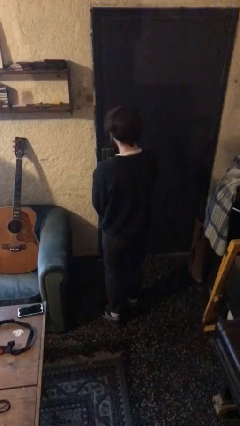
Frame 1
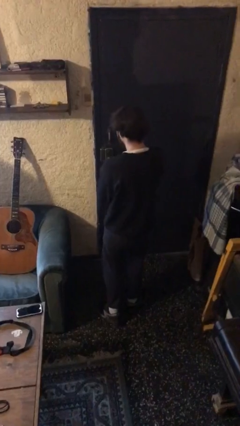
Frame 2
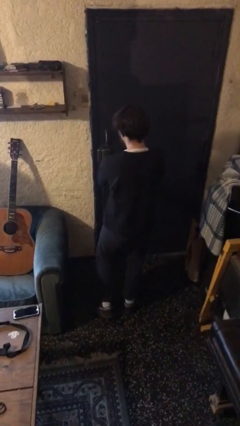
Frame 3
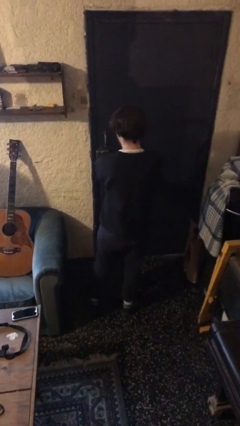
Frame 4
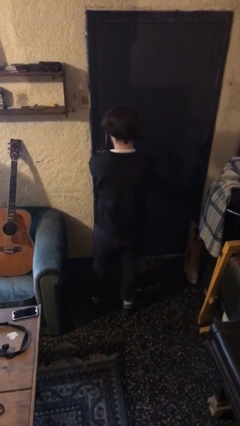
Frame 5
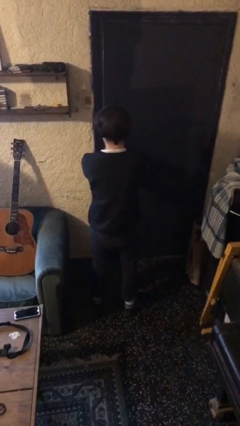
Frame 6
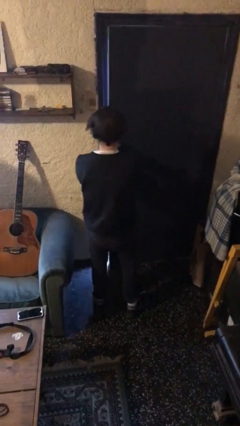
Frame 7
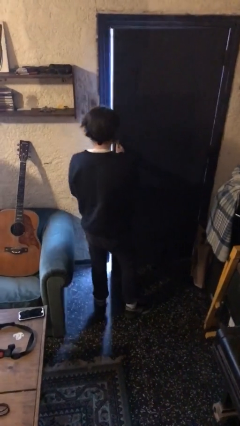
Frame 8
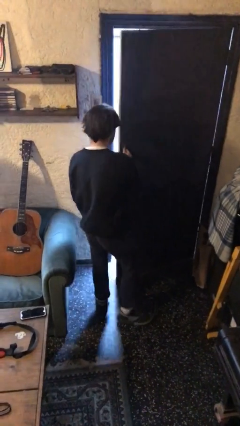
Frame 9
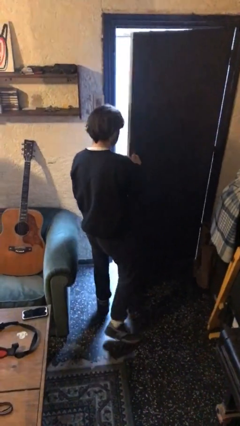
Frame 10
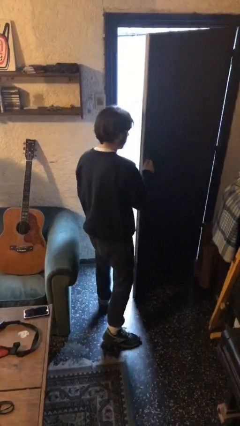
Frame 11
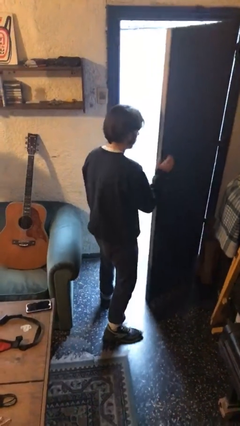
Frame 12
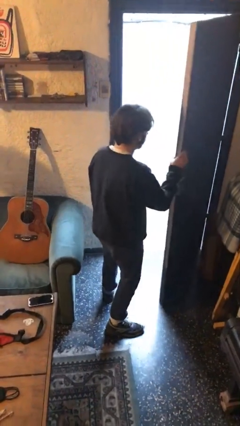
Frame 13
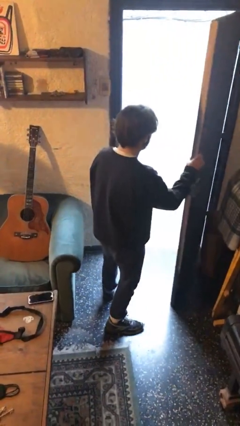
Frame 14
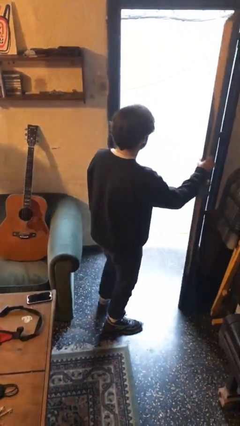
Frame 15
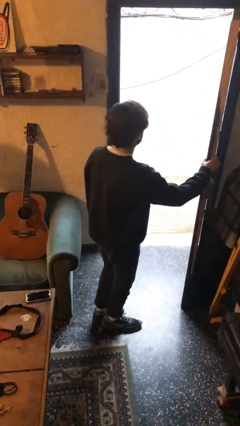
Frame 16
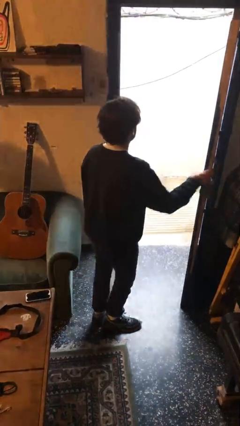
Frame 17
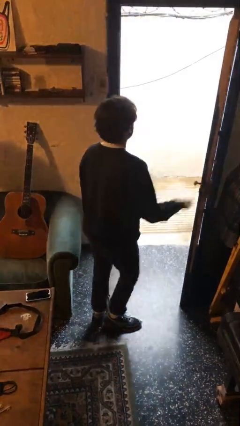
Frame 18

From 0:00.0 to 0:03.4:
person opens facility door

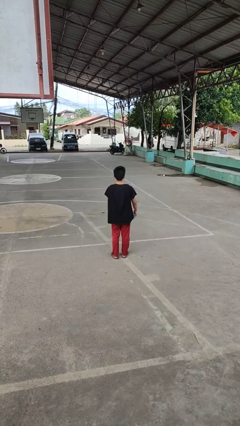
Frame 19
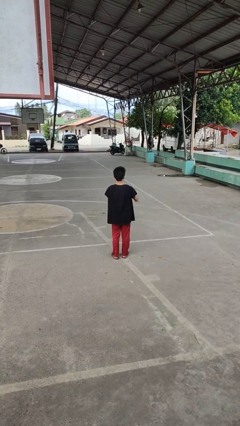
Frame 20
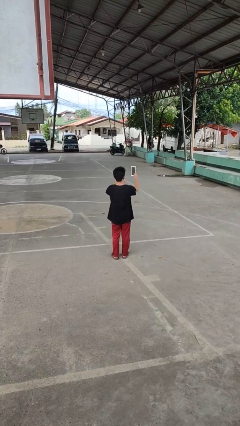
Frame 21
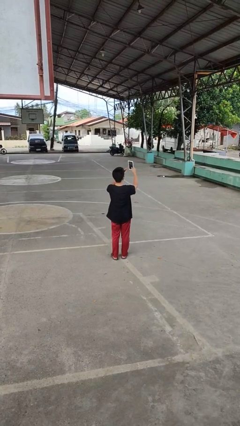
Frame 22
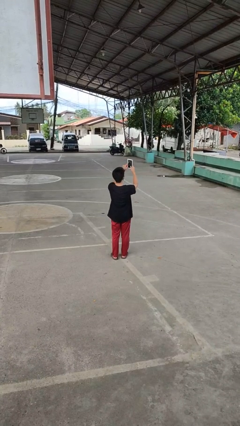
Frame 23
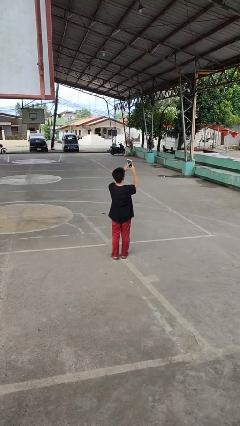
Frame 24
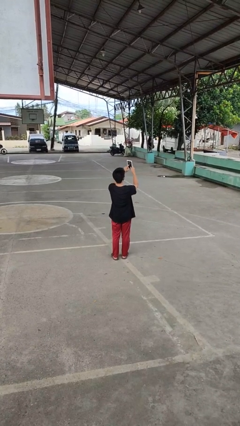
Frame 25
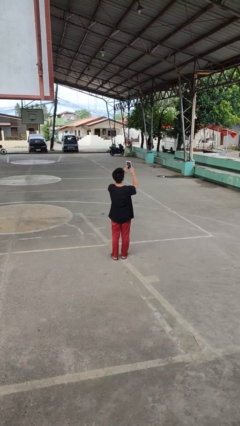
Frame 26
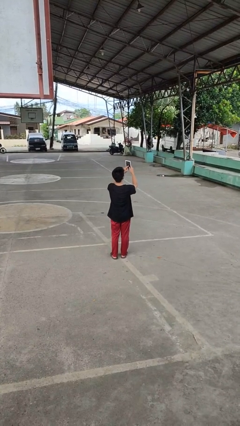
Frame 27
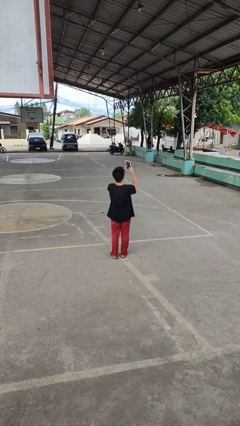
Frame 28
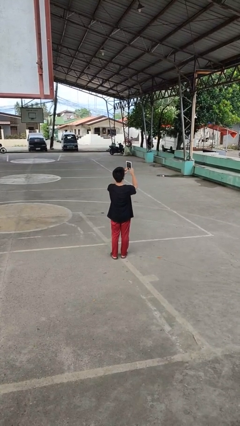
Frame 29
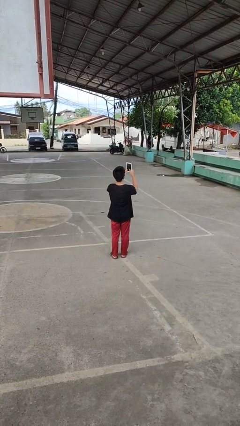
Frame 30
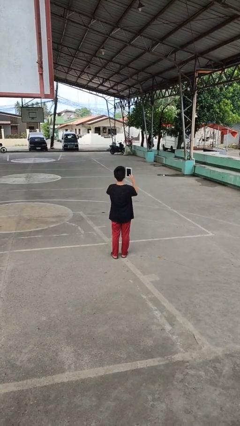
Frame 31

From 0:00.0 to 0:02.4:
person interacts with tablet

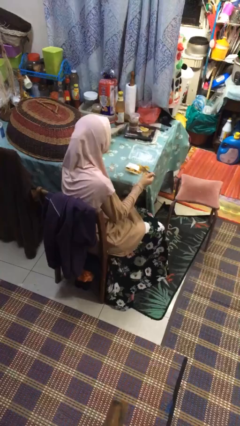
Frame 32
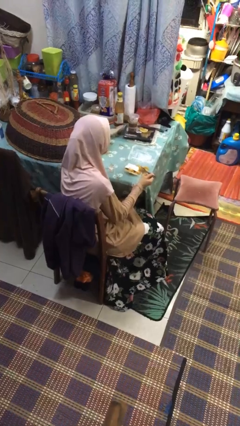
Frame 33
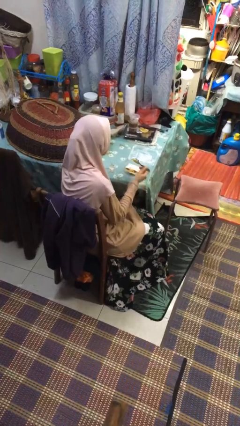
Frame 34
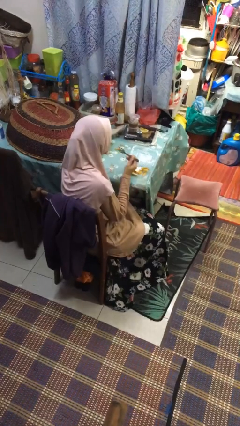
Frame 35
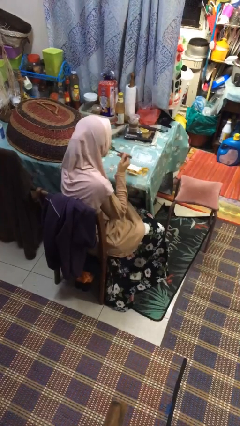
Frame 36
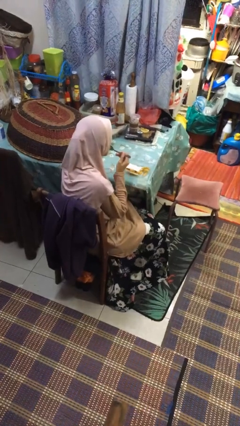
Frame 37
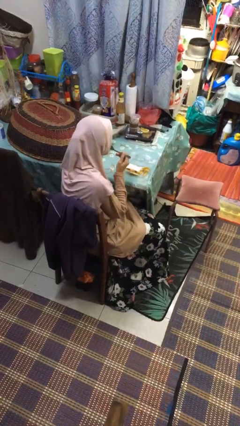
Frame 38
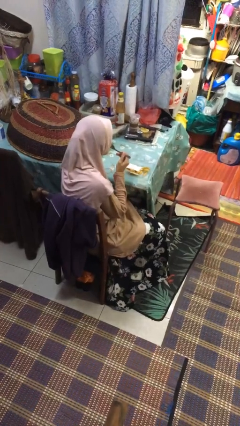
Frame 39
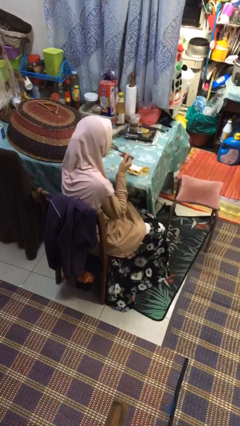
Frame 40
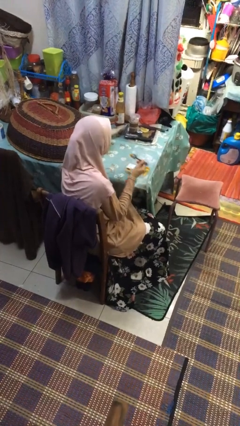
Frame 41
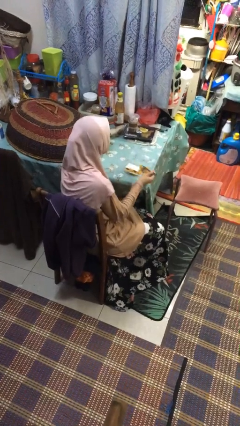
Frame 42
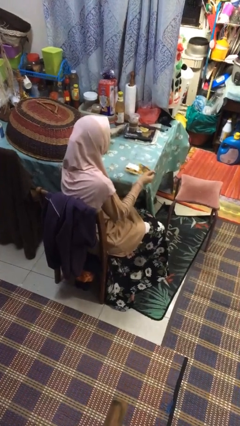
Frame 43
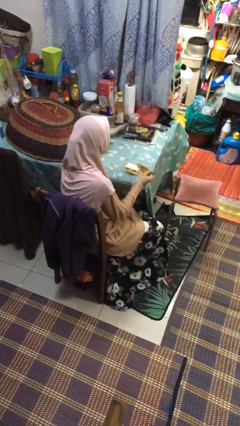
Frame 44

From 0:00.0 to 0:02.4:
person eats with utensil

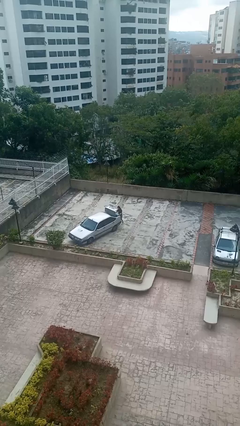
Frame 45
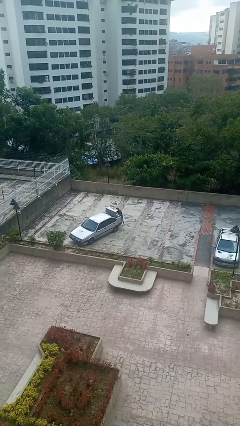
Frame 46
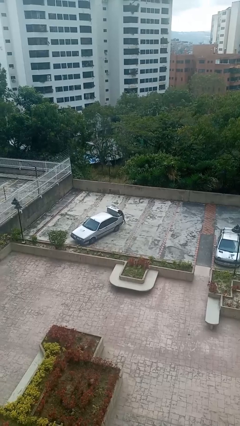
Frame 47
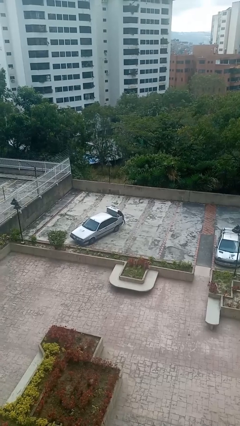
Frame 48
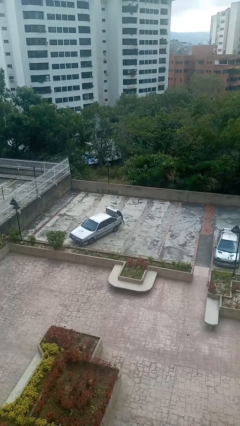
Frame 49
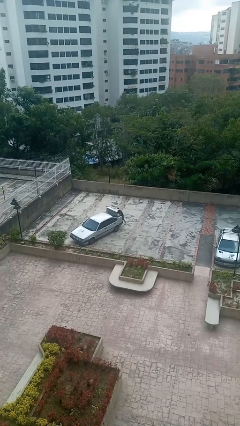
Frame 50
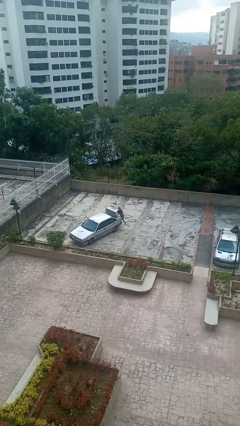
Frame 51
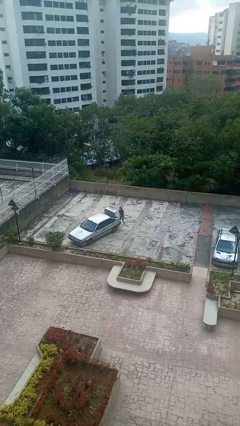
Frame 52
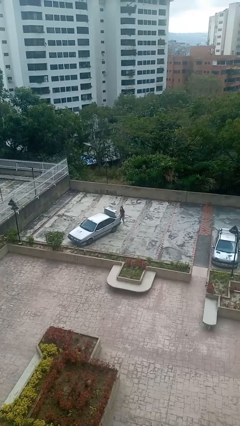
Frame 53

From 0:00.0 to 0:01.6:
person loads car

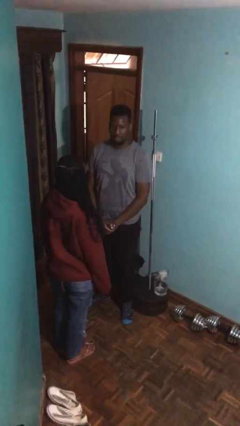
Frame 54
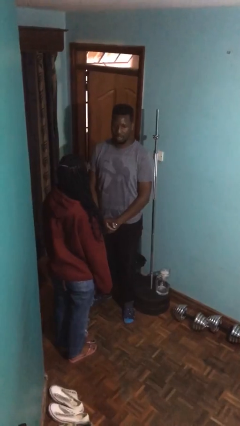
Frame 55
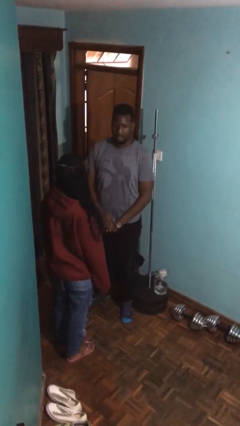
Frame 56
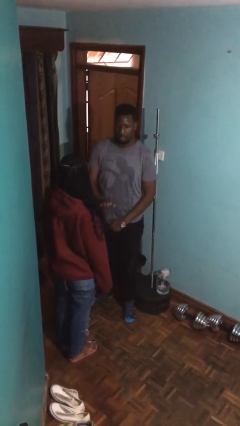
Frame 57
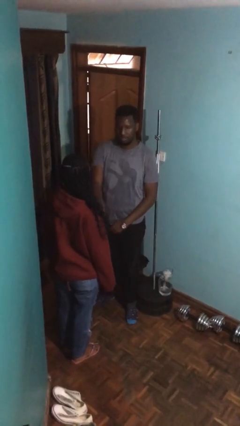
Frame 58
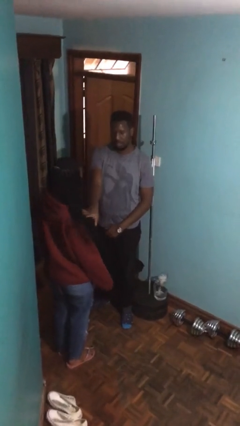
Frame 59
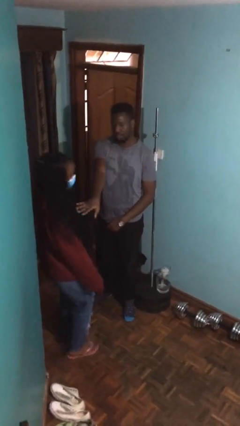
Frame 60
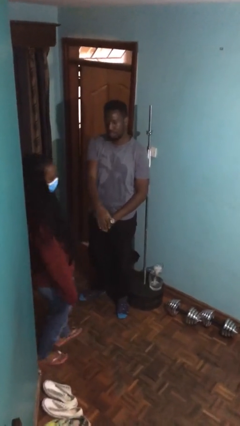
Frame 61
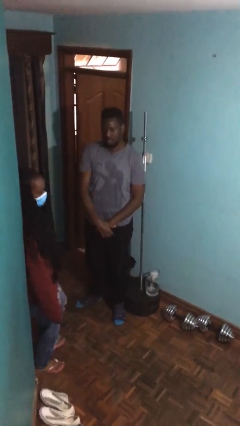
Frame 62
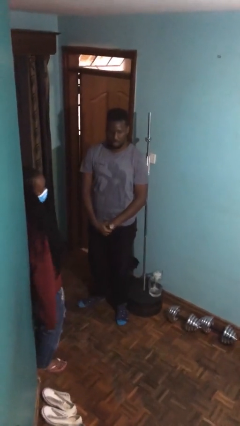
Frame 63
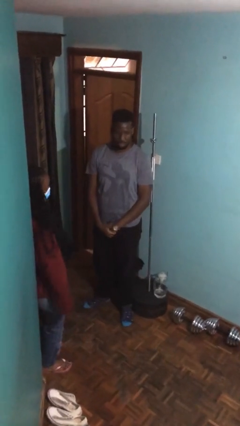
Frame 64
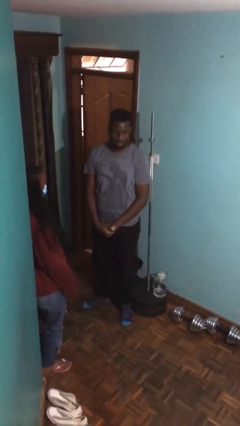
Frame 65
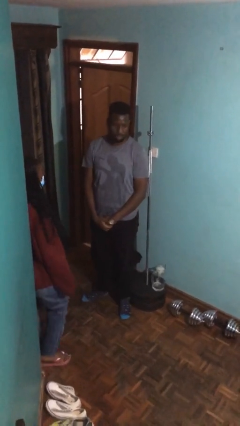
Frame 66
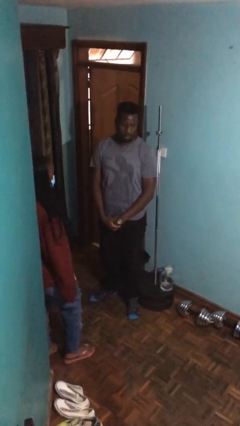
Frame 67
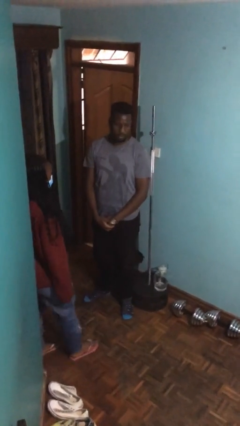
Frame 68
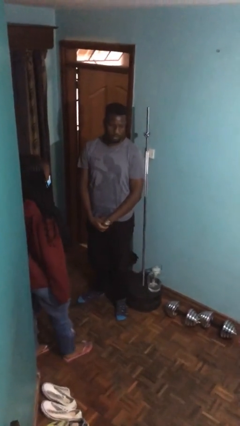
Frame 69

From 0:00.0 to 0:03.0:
person shoves person

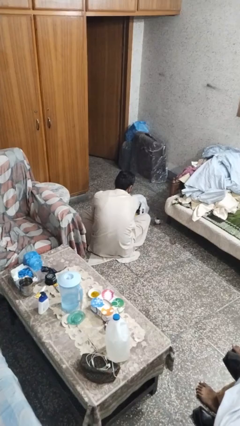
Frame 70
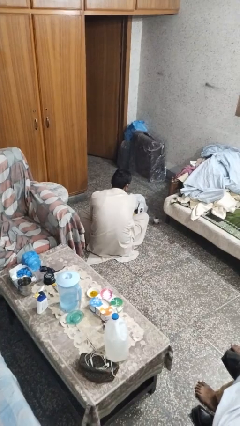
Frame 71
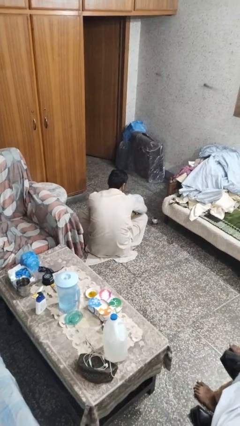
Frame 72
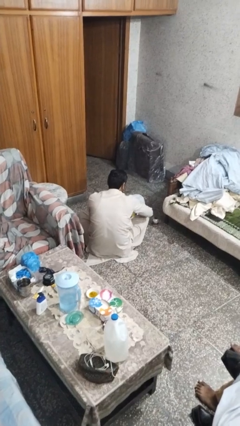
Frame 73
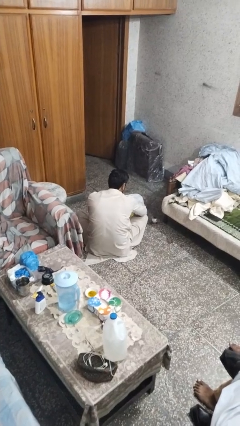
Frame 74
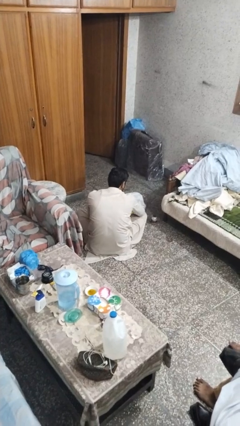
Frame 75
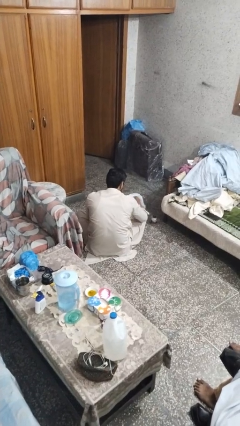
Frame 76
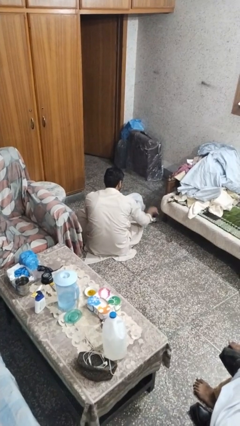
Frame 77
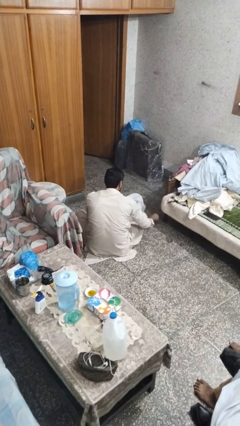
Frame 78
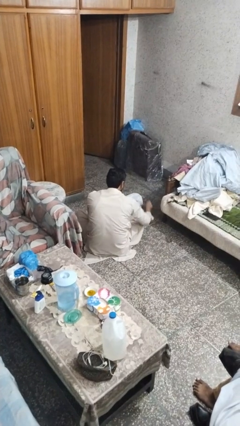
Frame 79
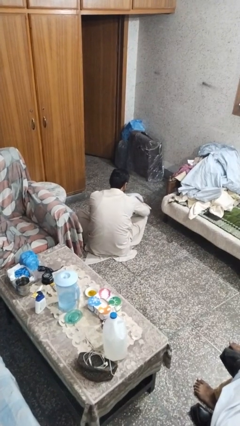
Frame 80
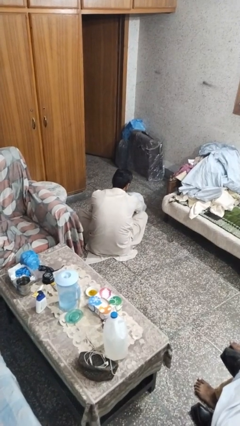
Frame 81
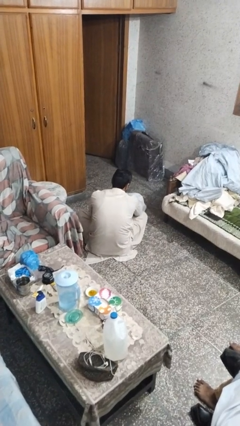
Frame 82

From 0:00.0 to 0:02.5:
person puts object into bag

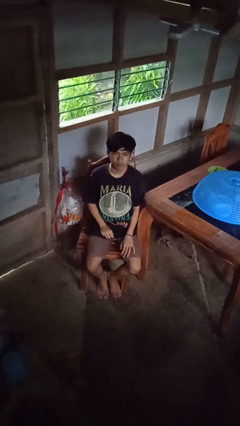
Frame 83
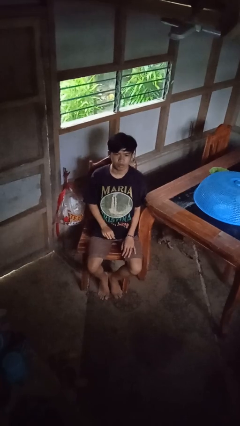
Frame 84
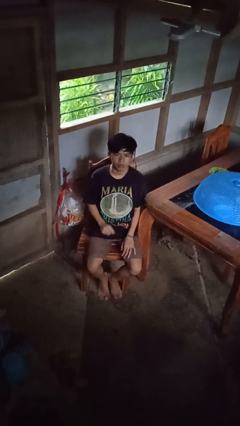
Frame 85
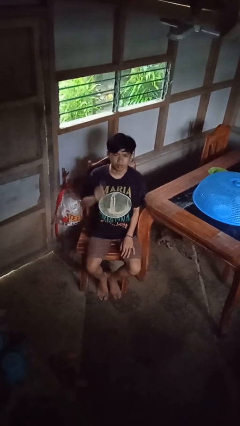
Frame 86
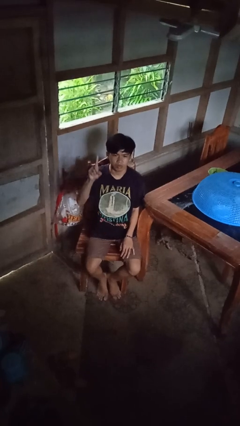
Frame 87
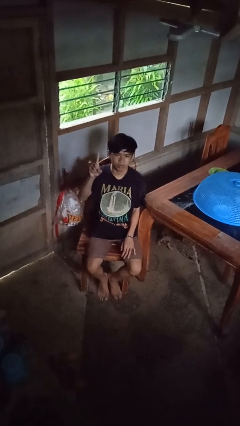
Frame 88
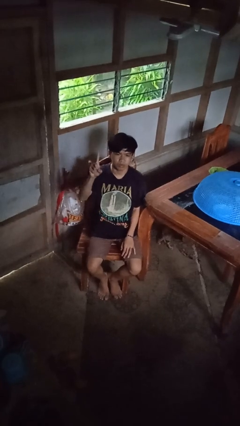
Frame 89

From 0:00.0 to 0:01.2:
person gestures number one

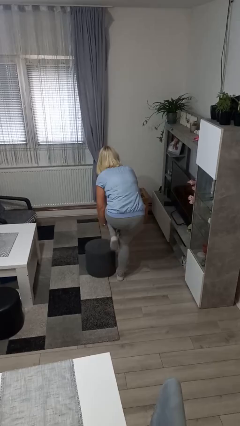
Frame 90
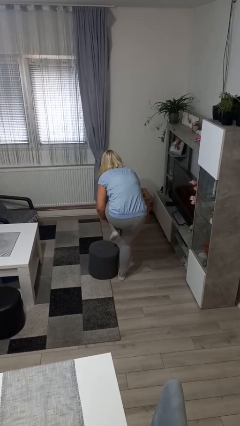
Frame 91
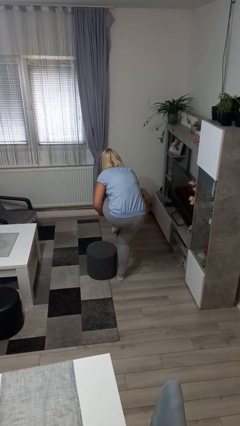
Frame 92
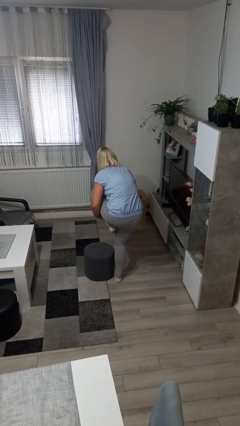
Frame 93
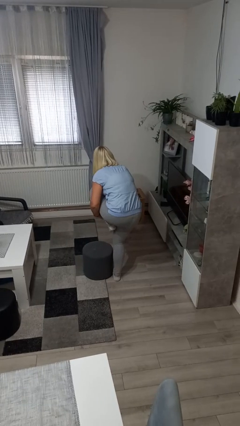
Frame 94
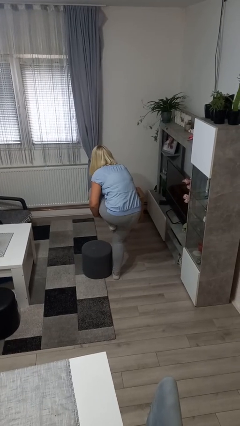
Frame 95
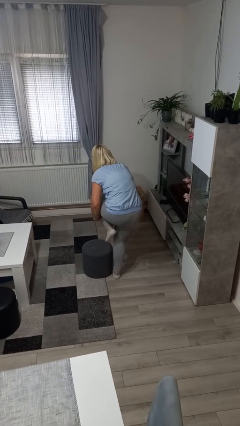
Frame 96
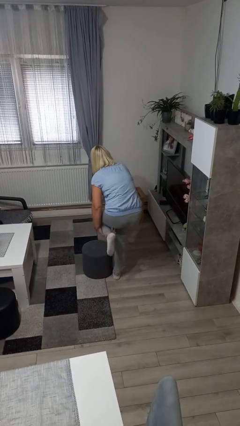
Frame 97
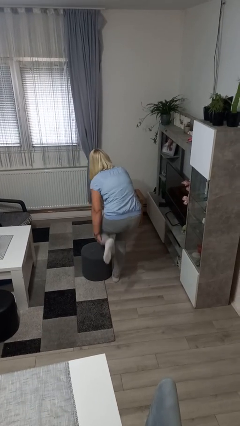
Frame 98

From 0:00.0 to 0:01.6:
person stubs toe
